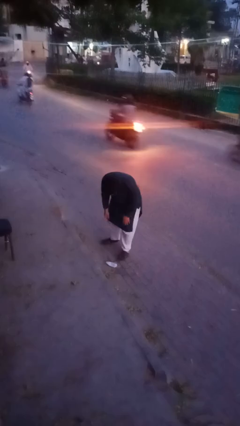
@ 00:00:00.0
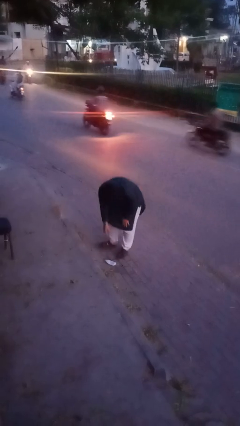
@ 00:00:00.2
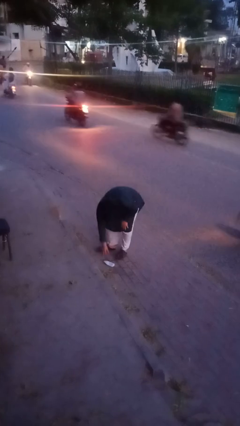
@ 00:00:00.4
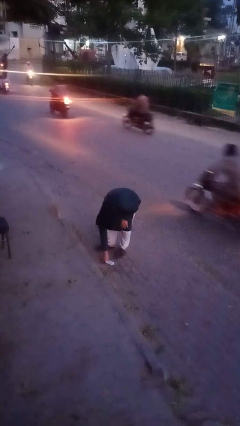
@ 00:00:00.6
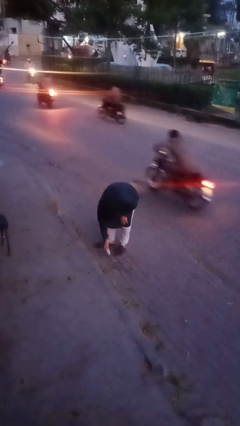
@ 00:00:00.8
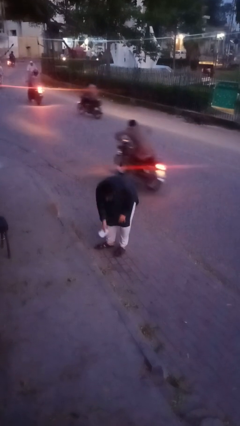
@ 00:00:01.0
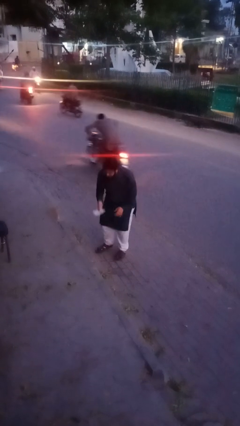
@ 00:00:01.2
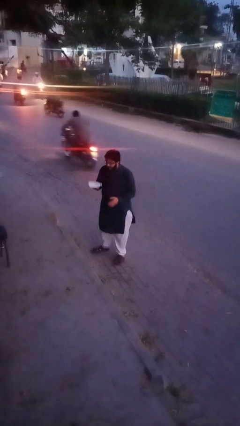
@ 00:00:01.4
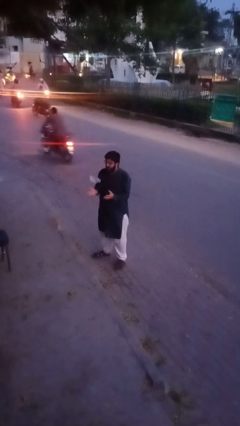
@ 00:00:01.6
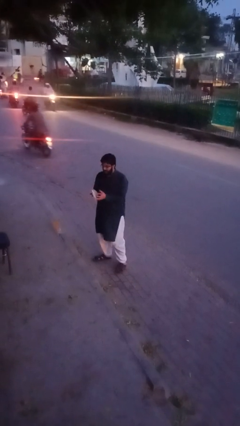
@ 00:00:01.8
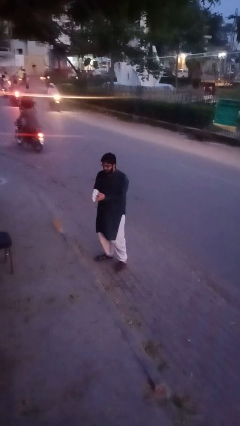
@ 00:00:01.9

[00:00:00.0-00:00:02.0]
person picks up object from floor

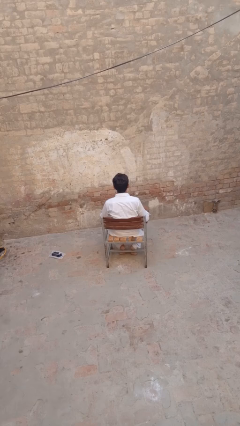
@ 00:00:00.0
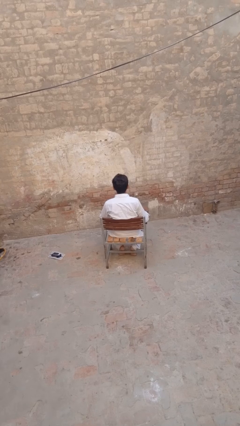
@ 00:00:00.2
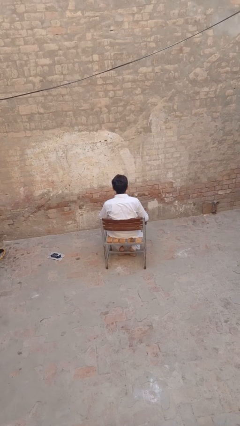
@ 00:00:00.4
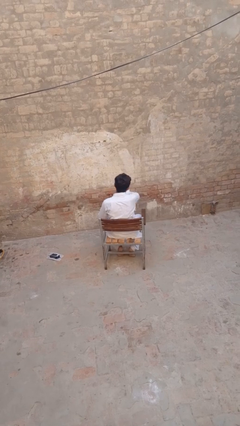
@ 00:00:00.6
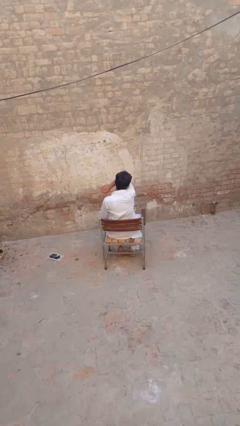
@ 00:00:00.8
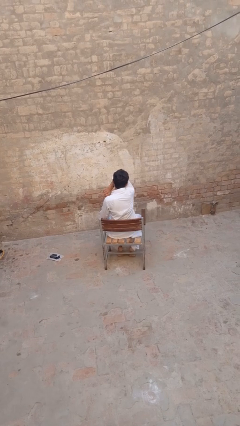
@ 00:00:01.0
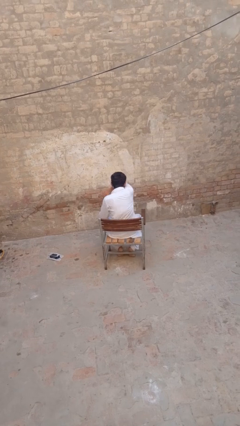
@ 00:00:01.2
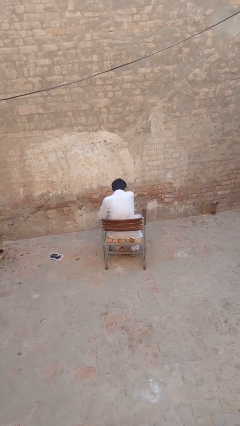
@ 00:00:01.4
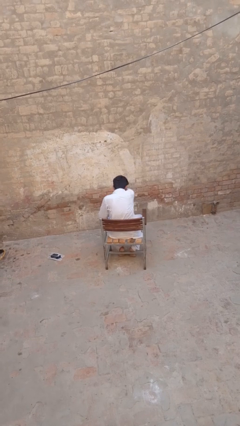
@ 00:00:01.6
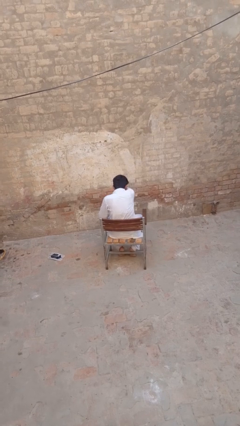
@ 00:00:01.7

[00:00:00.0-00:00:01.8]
person sneezes into arm

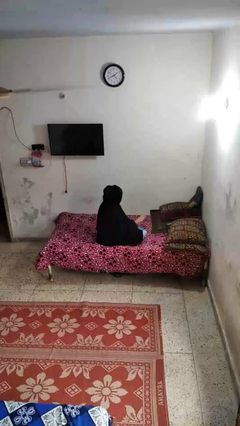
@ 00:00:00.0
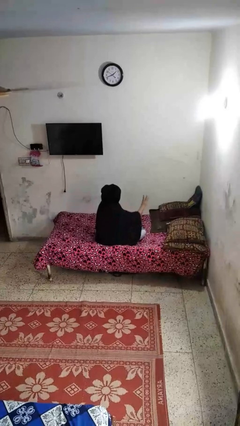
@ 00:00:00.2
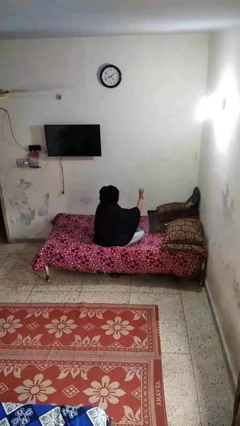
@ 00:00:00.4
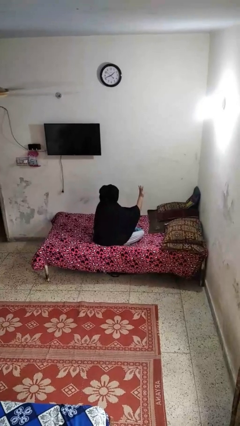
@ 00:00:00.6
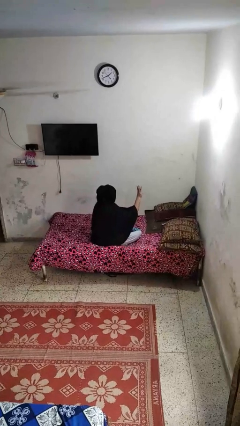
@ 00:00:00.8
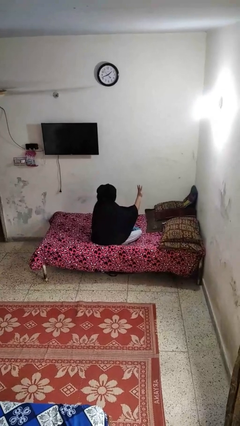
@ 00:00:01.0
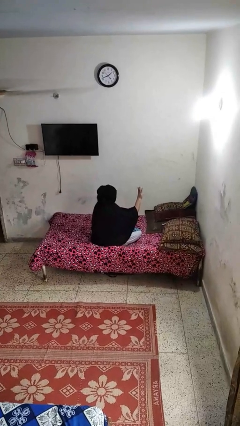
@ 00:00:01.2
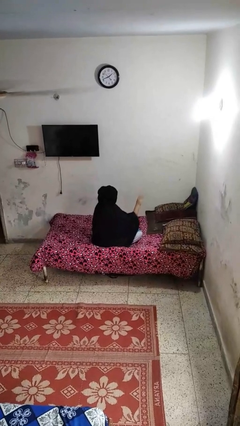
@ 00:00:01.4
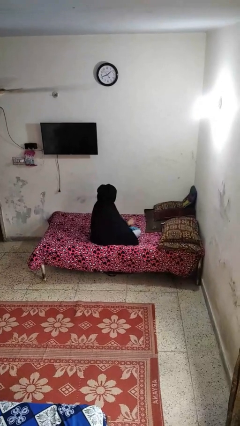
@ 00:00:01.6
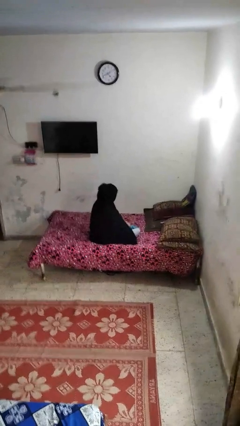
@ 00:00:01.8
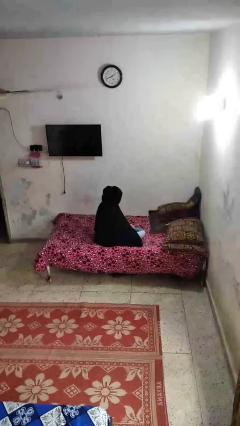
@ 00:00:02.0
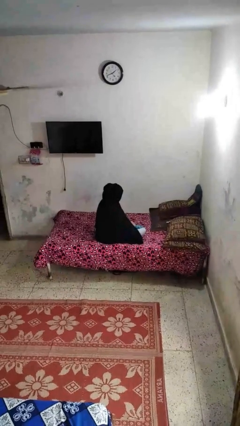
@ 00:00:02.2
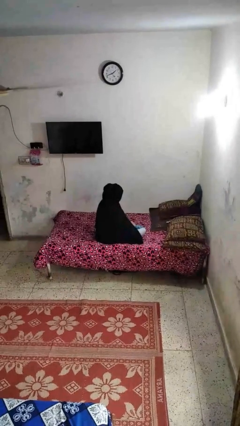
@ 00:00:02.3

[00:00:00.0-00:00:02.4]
person gestures number three

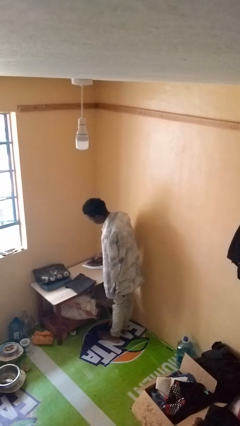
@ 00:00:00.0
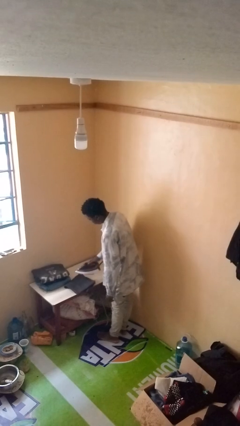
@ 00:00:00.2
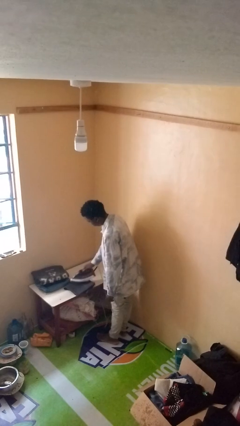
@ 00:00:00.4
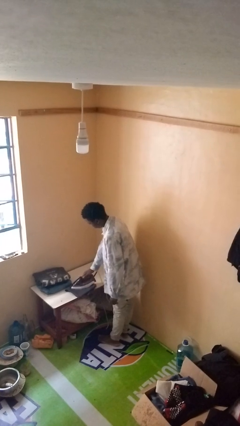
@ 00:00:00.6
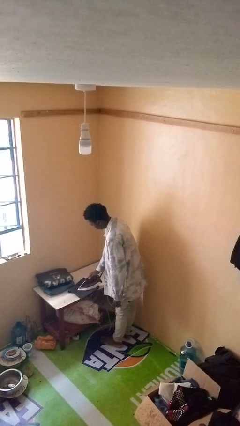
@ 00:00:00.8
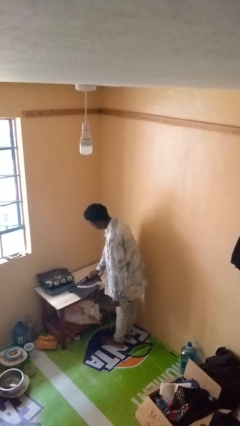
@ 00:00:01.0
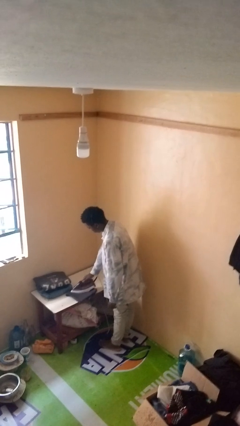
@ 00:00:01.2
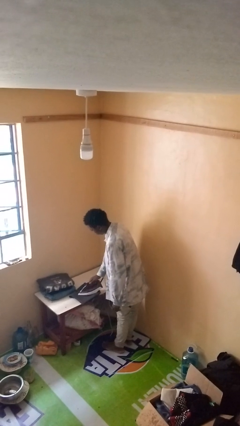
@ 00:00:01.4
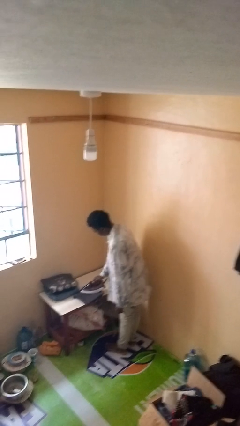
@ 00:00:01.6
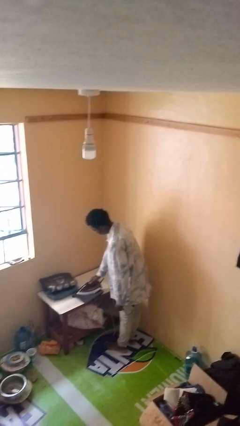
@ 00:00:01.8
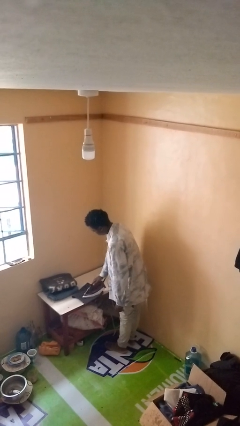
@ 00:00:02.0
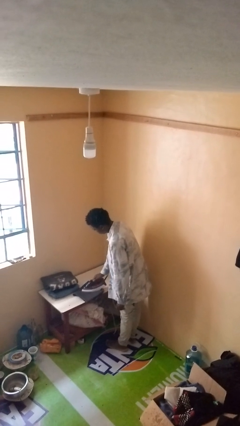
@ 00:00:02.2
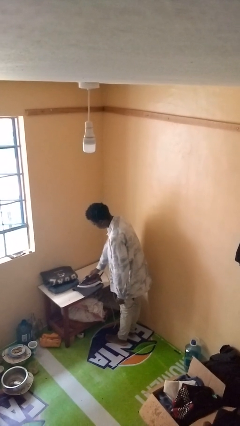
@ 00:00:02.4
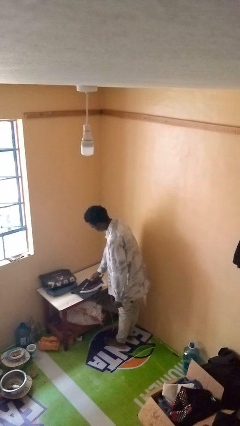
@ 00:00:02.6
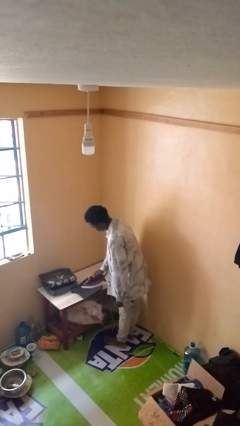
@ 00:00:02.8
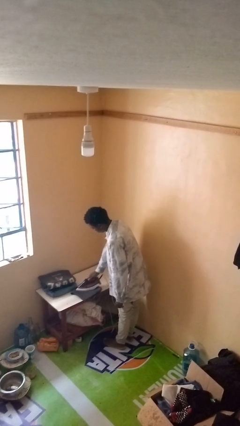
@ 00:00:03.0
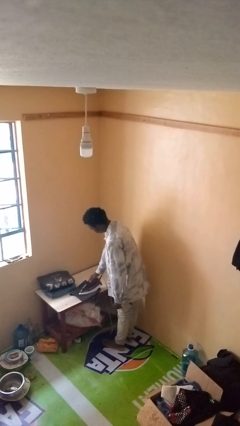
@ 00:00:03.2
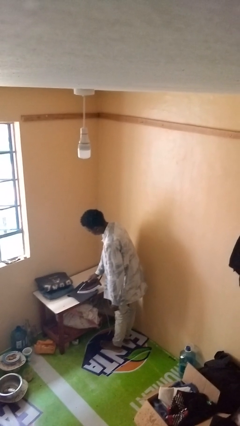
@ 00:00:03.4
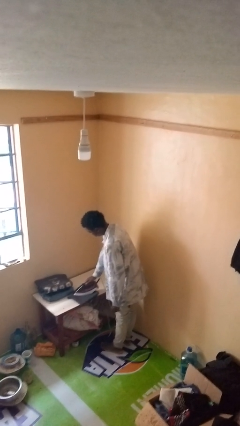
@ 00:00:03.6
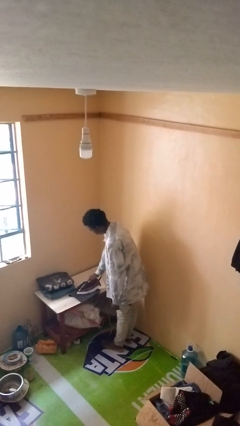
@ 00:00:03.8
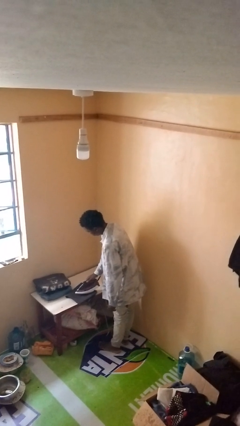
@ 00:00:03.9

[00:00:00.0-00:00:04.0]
person irons clothes

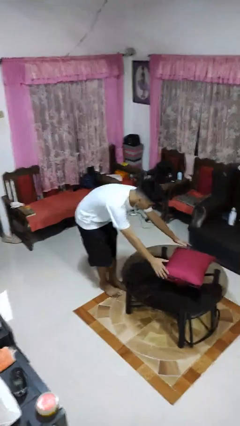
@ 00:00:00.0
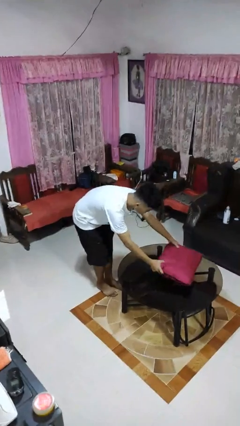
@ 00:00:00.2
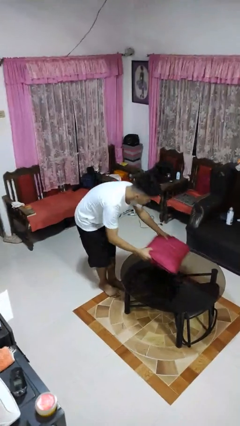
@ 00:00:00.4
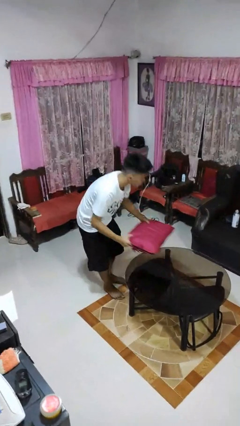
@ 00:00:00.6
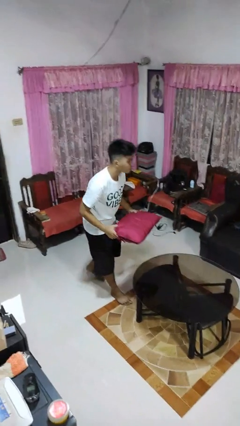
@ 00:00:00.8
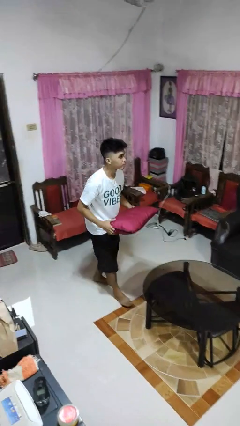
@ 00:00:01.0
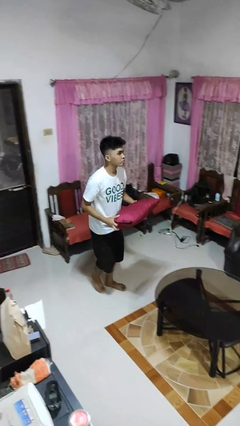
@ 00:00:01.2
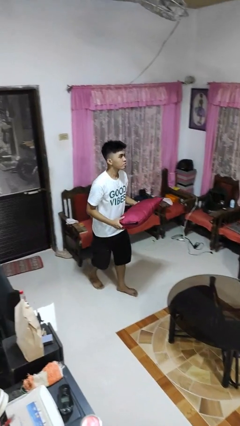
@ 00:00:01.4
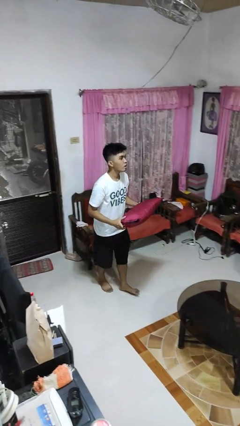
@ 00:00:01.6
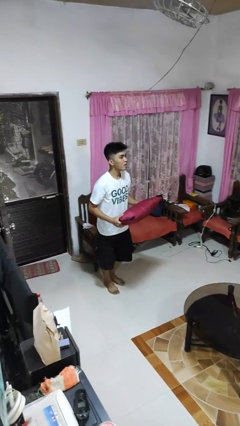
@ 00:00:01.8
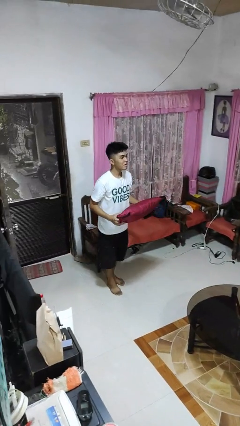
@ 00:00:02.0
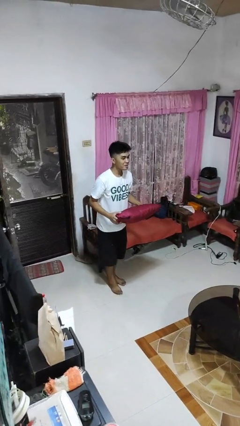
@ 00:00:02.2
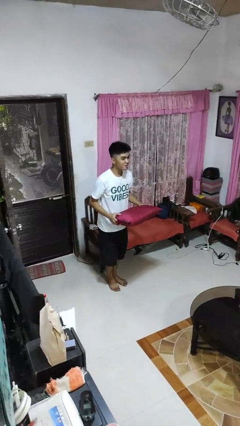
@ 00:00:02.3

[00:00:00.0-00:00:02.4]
person picks up object from table

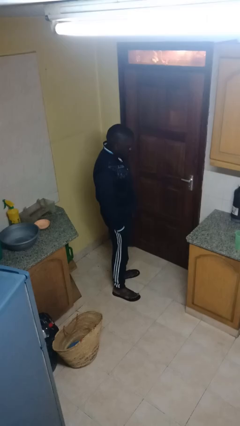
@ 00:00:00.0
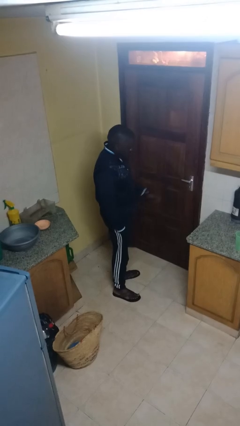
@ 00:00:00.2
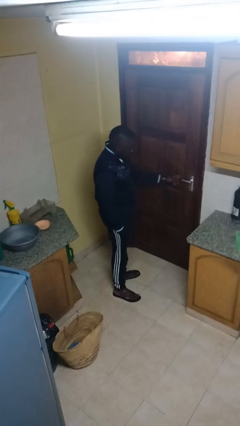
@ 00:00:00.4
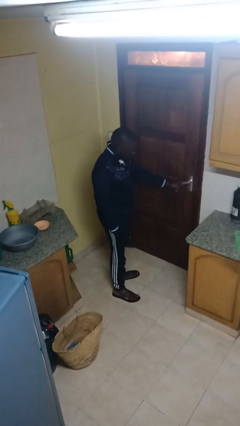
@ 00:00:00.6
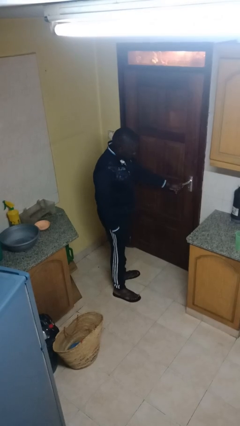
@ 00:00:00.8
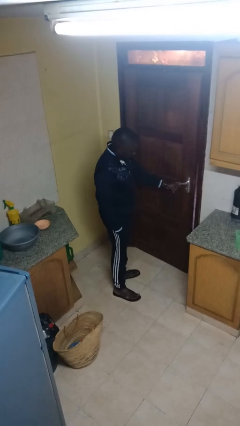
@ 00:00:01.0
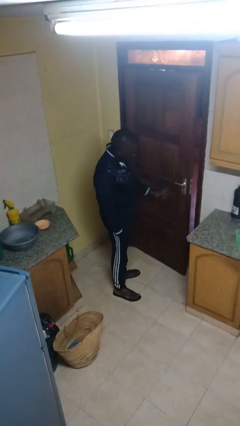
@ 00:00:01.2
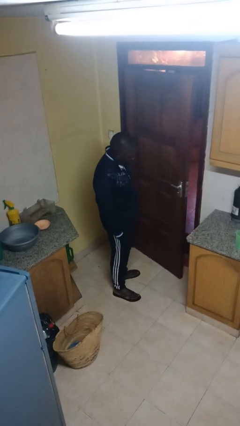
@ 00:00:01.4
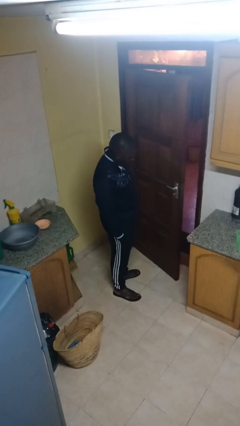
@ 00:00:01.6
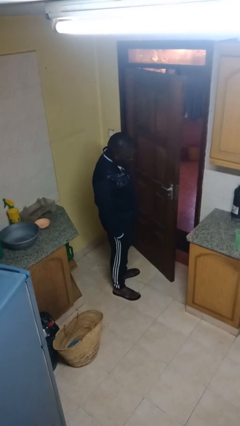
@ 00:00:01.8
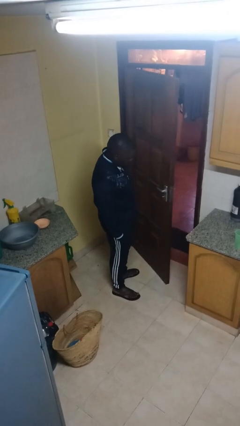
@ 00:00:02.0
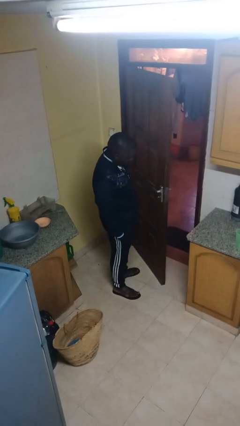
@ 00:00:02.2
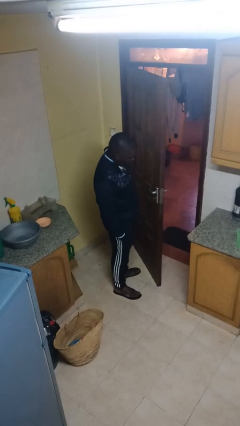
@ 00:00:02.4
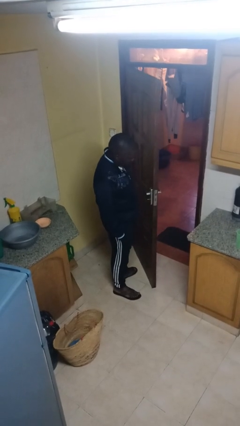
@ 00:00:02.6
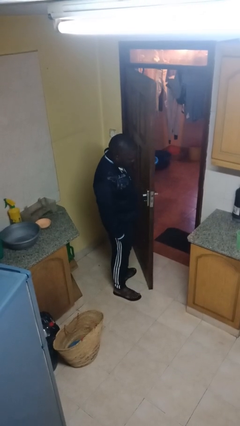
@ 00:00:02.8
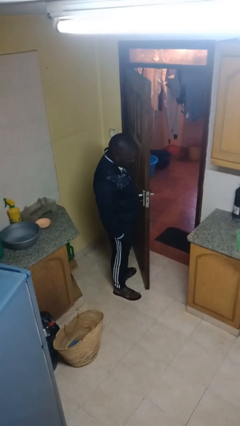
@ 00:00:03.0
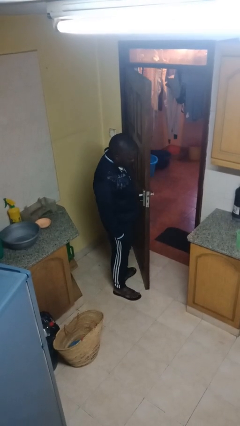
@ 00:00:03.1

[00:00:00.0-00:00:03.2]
person opens facility door

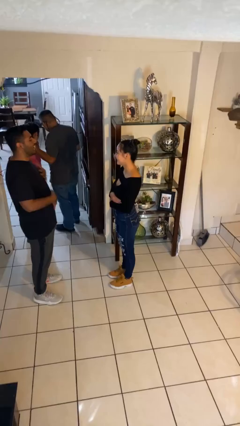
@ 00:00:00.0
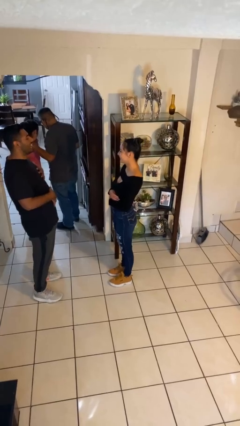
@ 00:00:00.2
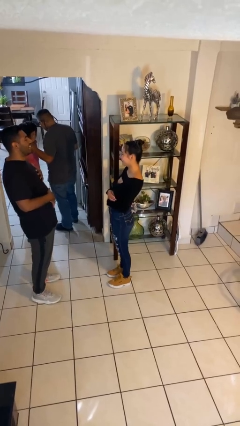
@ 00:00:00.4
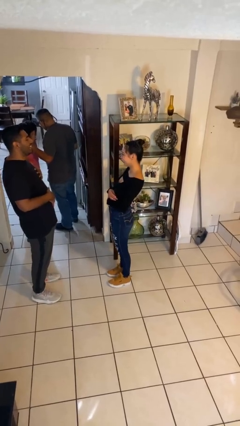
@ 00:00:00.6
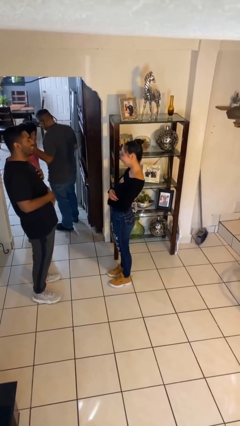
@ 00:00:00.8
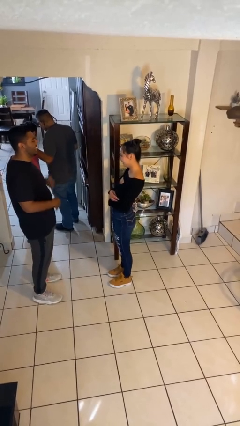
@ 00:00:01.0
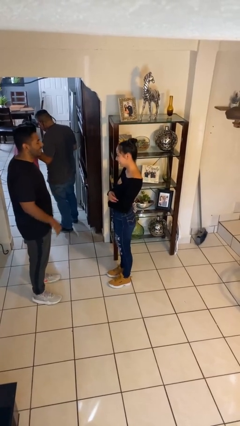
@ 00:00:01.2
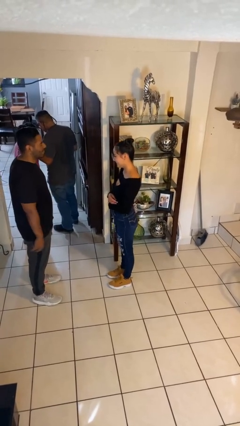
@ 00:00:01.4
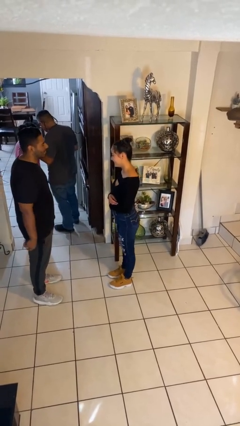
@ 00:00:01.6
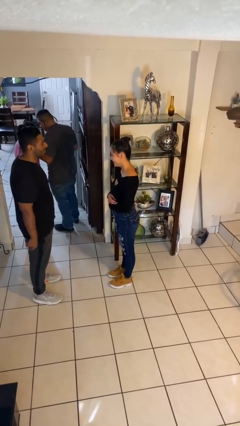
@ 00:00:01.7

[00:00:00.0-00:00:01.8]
person laughs with person
